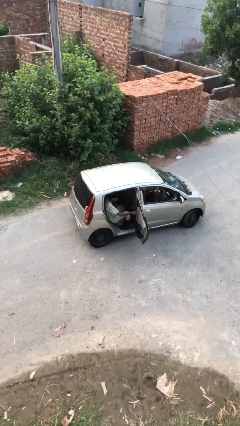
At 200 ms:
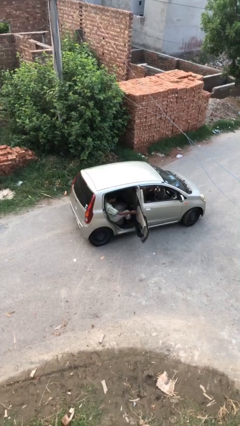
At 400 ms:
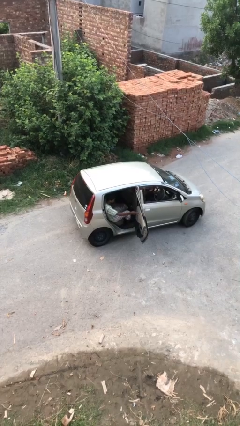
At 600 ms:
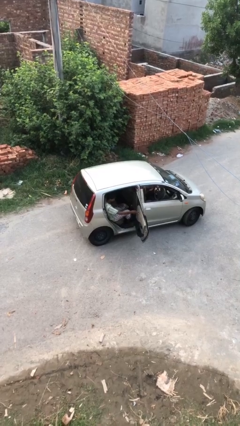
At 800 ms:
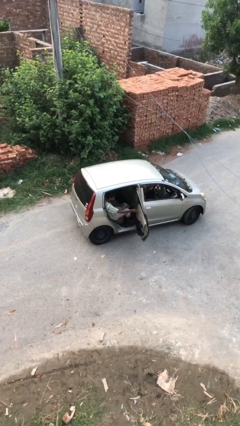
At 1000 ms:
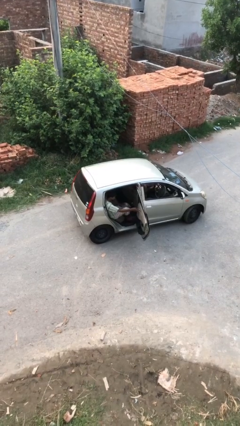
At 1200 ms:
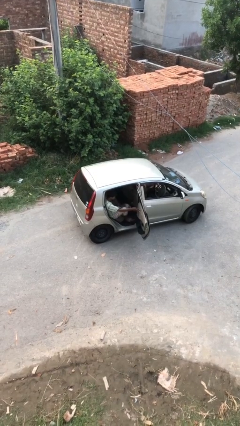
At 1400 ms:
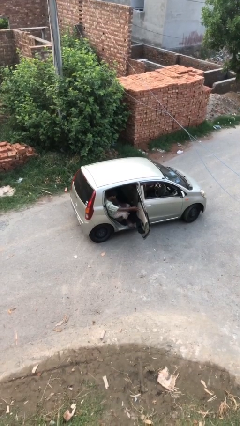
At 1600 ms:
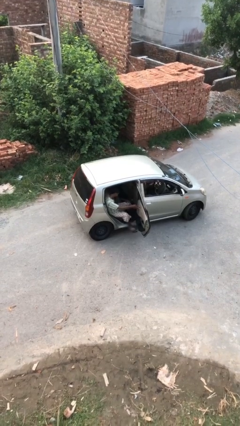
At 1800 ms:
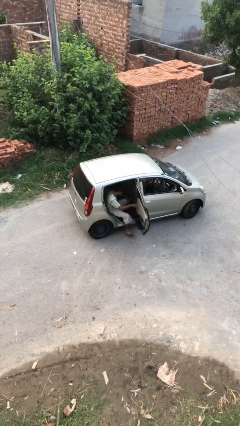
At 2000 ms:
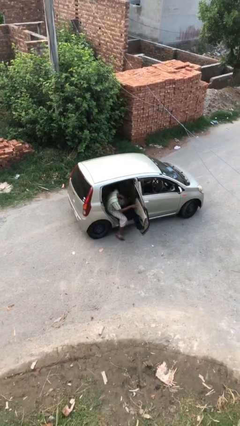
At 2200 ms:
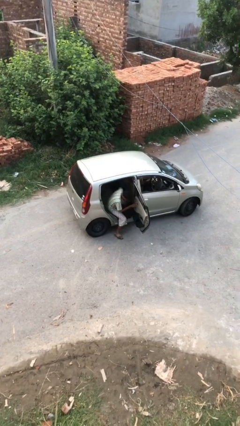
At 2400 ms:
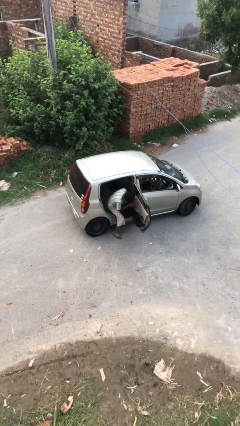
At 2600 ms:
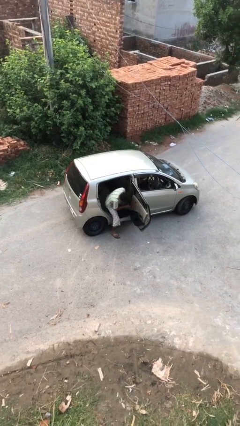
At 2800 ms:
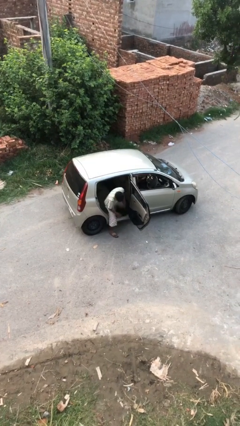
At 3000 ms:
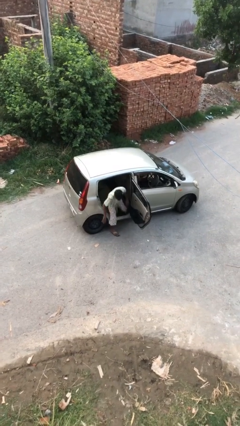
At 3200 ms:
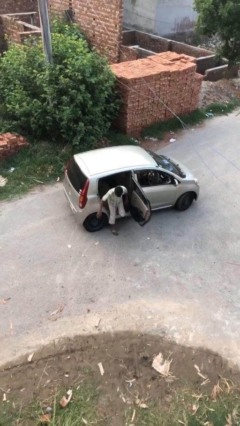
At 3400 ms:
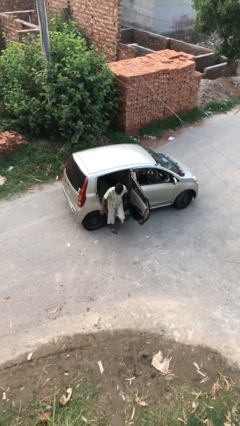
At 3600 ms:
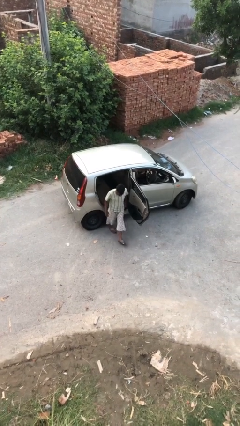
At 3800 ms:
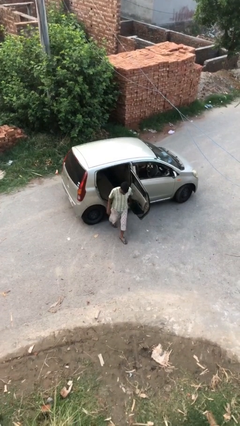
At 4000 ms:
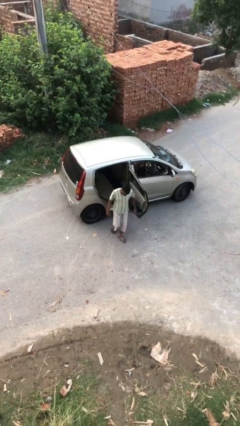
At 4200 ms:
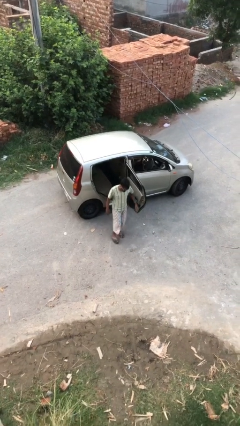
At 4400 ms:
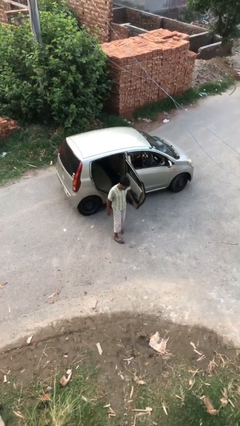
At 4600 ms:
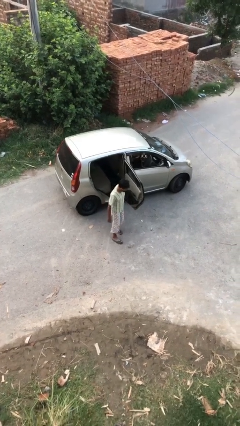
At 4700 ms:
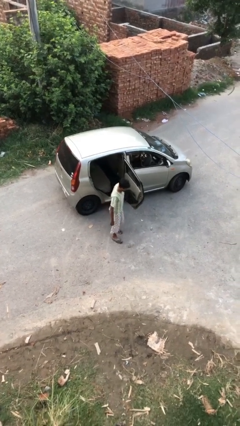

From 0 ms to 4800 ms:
person exits car

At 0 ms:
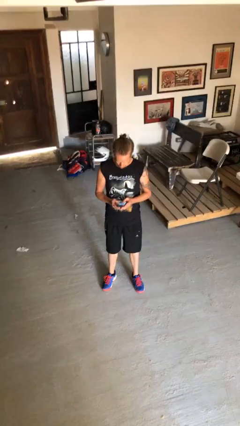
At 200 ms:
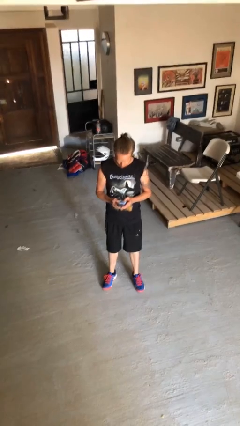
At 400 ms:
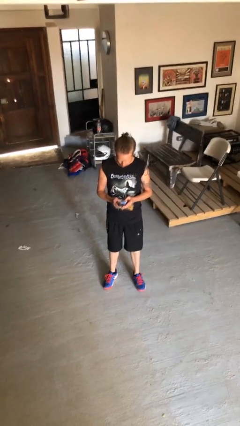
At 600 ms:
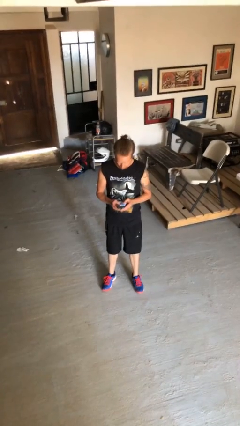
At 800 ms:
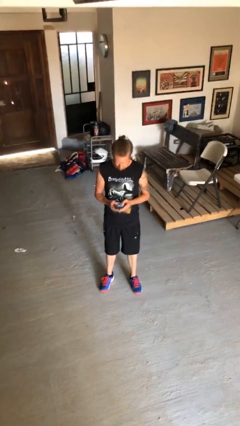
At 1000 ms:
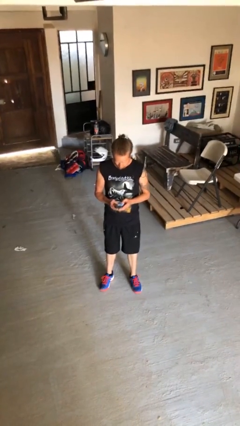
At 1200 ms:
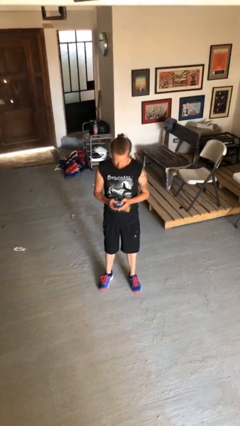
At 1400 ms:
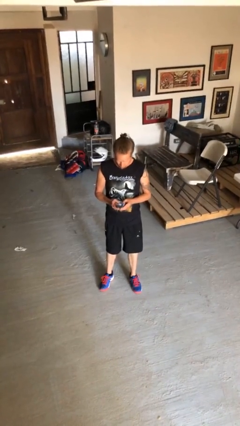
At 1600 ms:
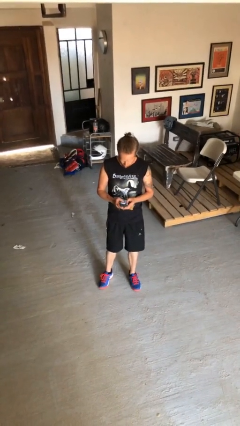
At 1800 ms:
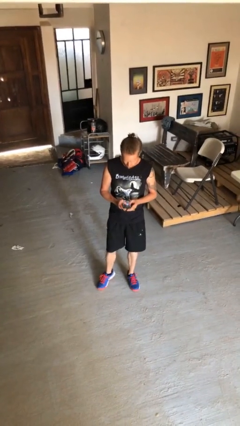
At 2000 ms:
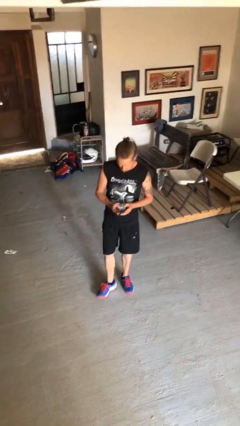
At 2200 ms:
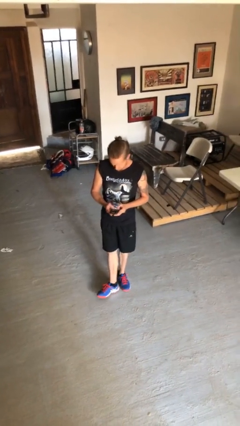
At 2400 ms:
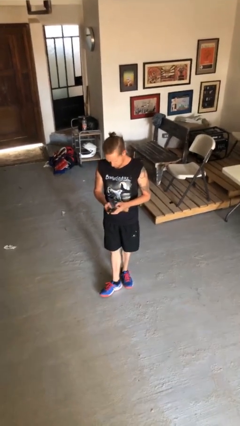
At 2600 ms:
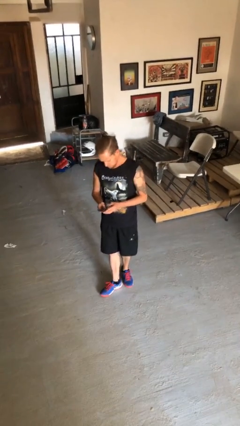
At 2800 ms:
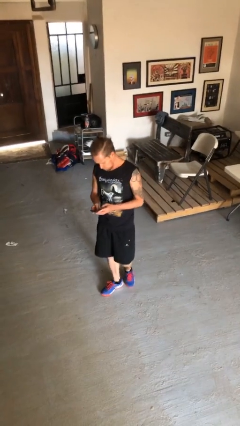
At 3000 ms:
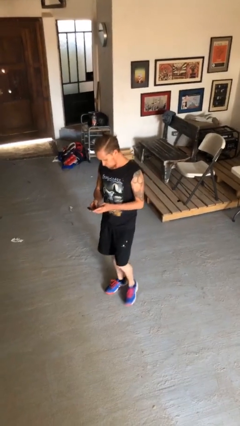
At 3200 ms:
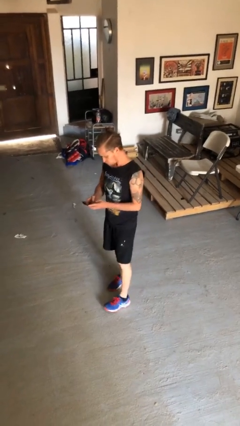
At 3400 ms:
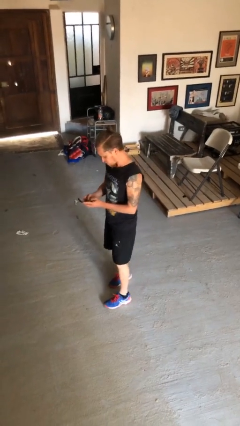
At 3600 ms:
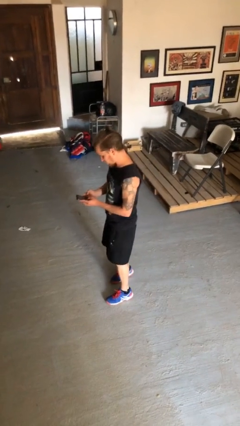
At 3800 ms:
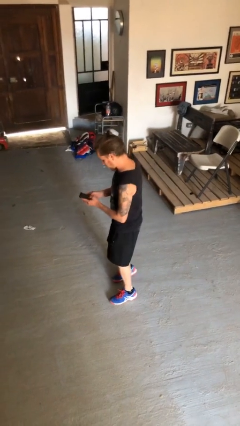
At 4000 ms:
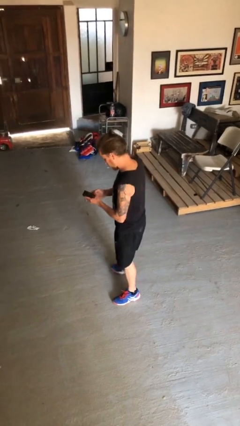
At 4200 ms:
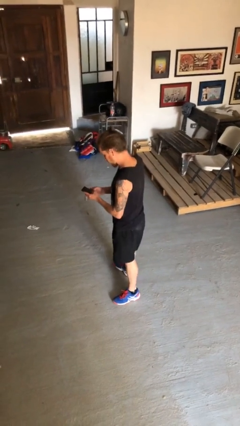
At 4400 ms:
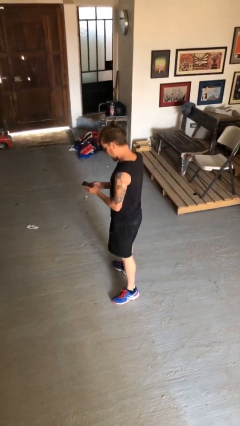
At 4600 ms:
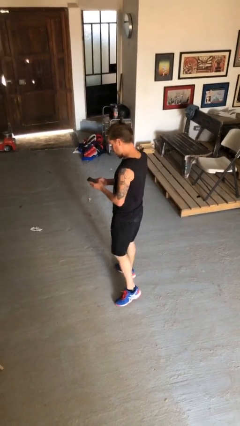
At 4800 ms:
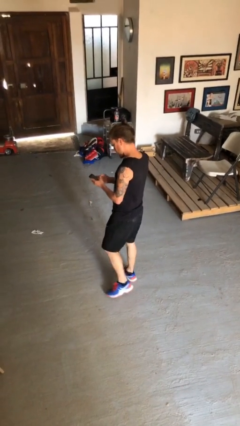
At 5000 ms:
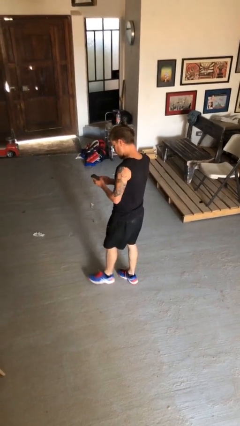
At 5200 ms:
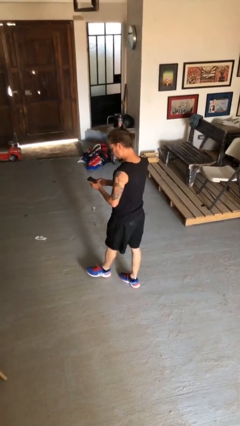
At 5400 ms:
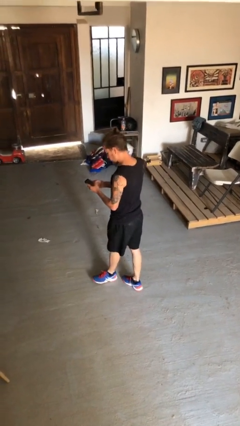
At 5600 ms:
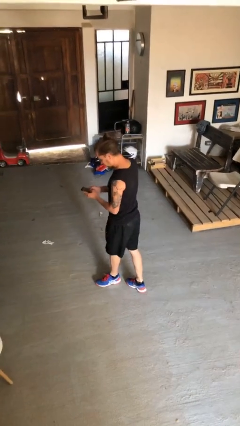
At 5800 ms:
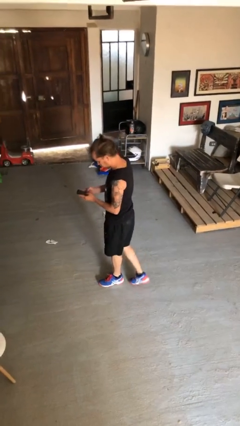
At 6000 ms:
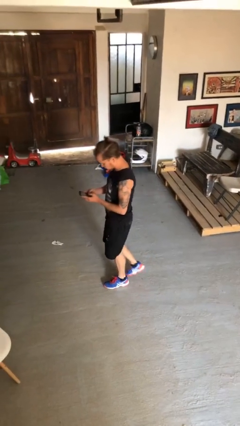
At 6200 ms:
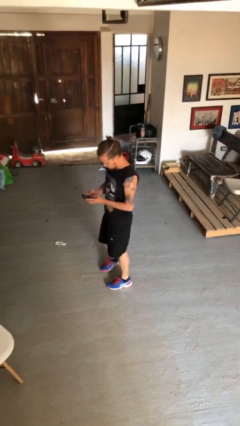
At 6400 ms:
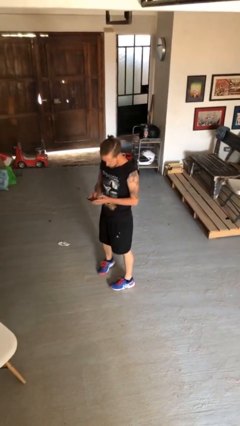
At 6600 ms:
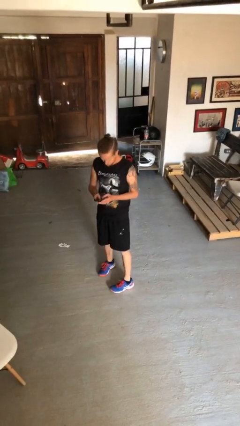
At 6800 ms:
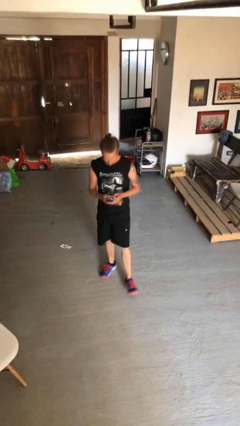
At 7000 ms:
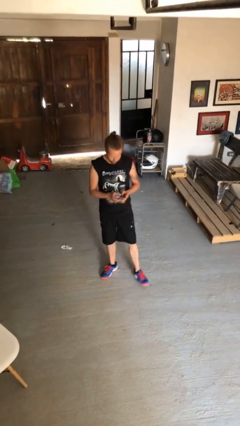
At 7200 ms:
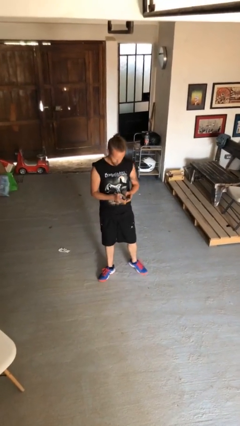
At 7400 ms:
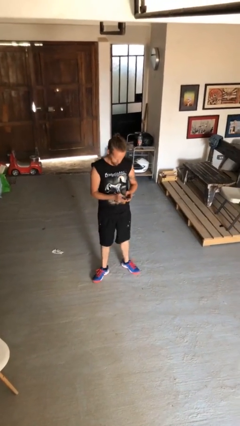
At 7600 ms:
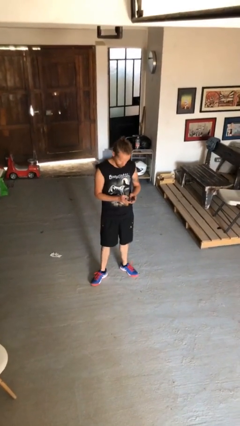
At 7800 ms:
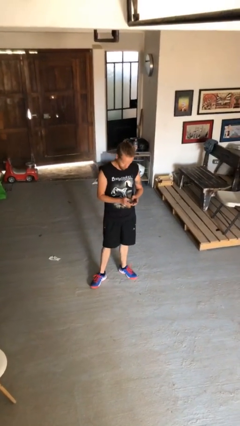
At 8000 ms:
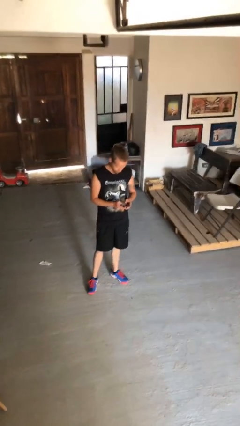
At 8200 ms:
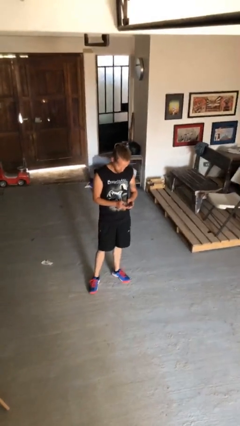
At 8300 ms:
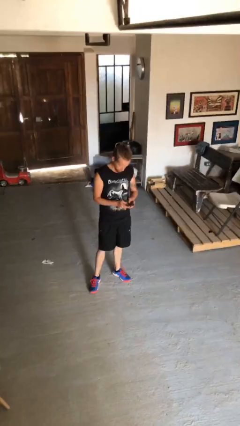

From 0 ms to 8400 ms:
person texts on phone

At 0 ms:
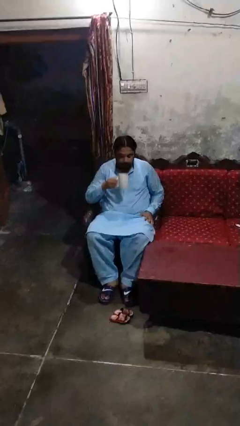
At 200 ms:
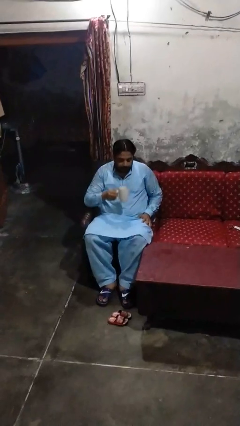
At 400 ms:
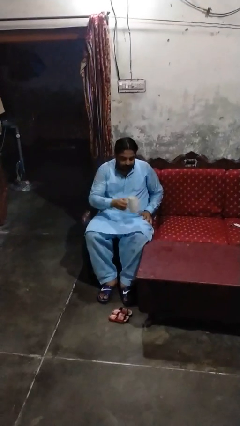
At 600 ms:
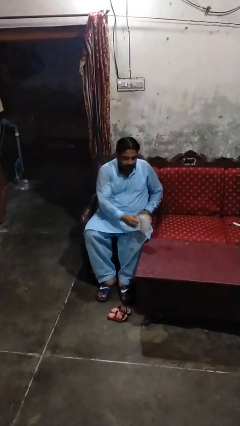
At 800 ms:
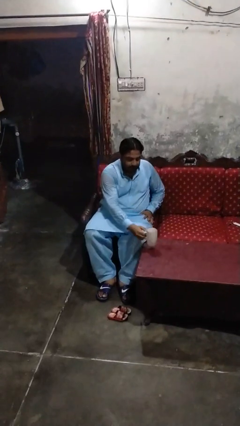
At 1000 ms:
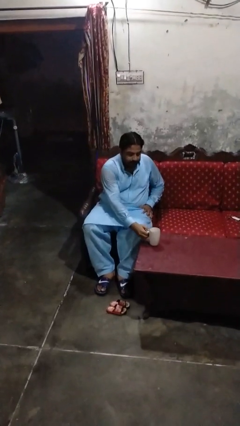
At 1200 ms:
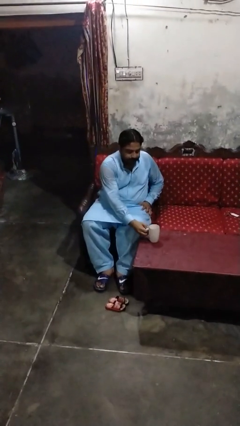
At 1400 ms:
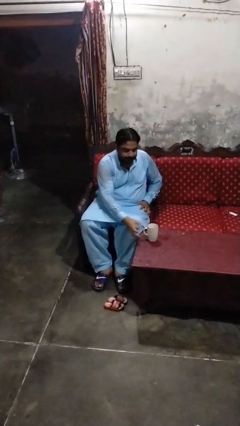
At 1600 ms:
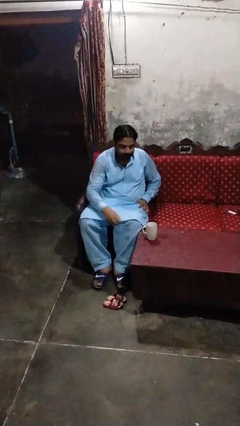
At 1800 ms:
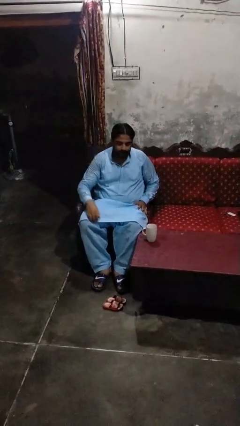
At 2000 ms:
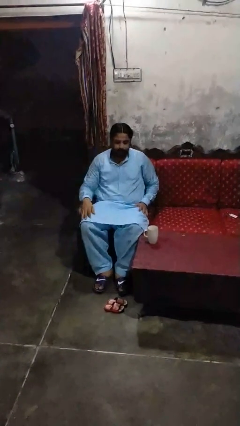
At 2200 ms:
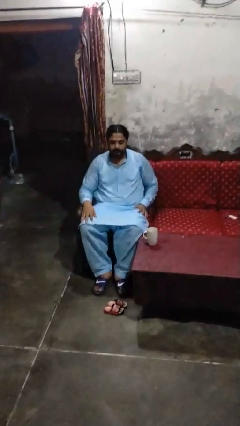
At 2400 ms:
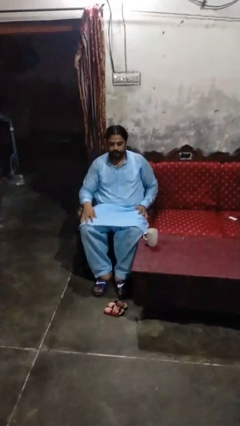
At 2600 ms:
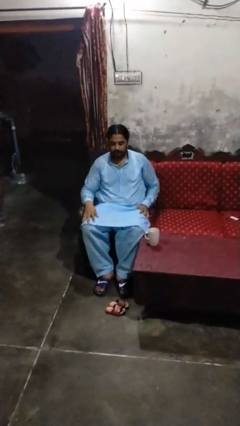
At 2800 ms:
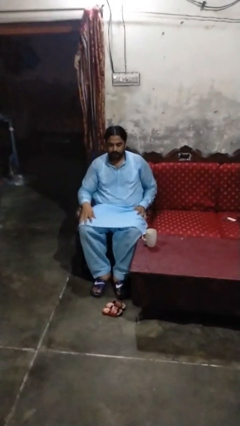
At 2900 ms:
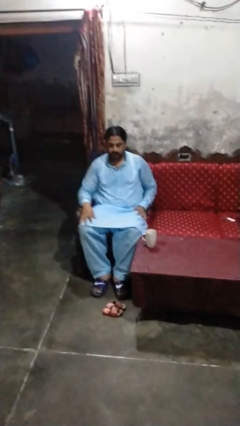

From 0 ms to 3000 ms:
person puts down object on table

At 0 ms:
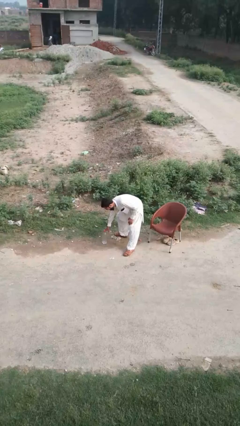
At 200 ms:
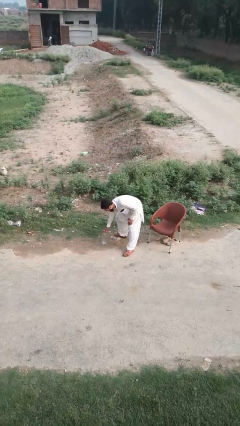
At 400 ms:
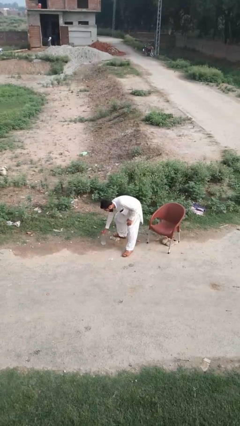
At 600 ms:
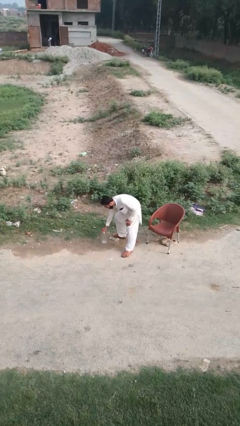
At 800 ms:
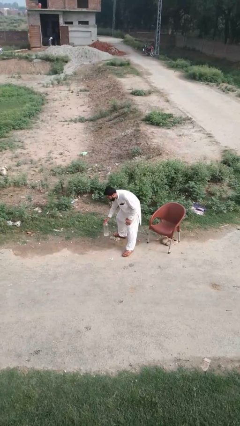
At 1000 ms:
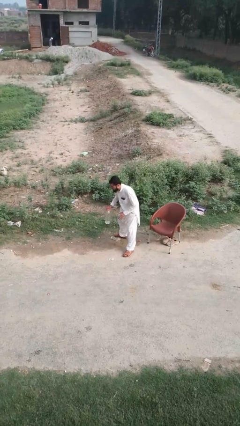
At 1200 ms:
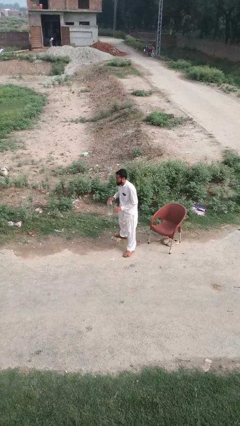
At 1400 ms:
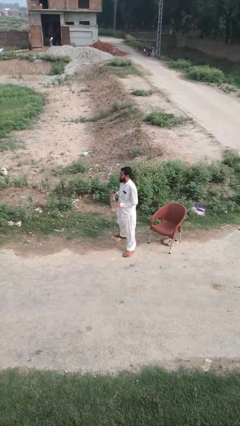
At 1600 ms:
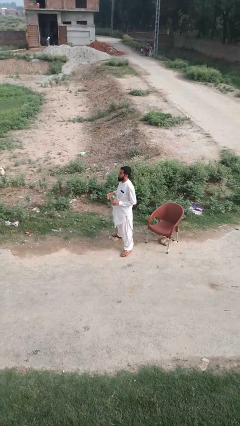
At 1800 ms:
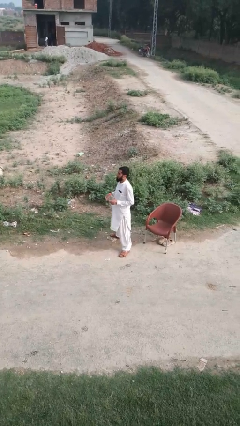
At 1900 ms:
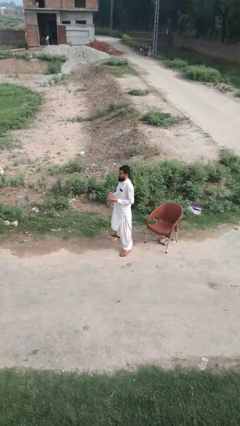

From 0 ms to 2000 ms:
person picks up object from floor
